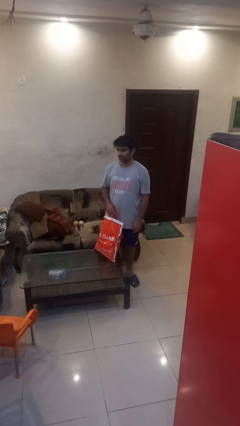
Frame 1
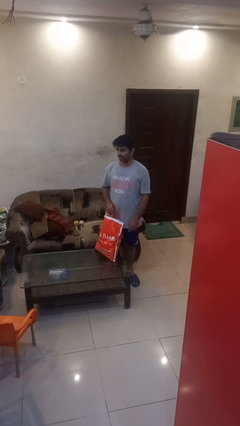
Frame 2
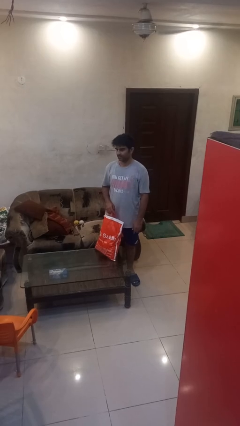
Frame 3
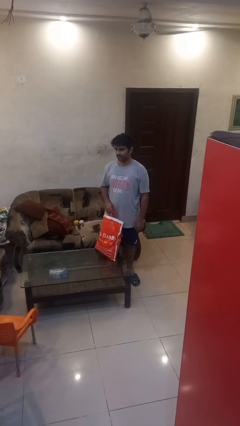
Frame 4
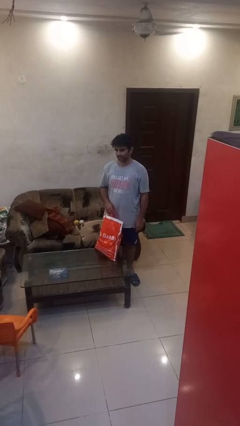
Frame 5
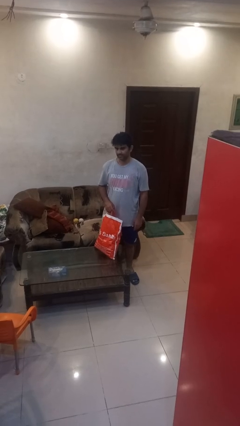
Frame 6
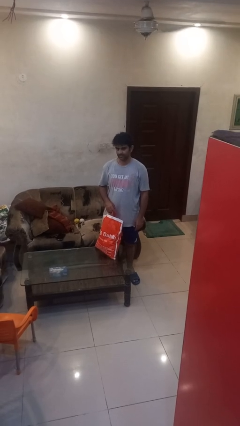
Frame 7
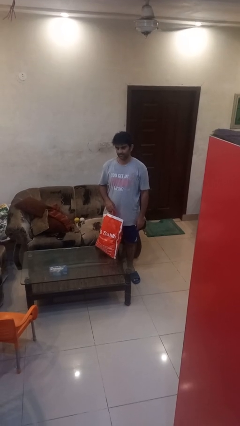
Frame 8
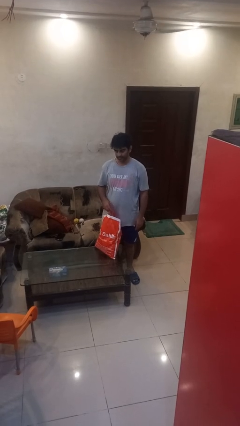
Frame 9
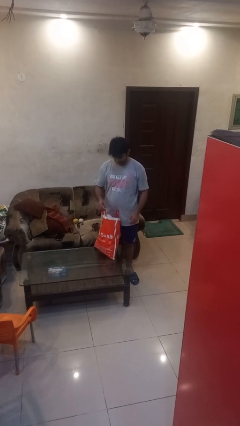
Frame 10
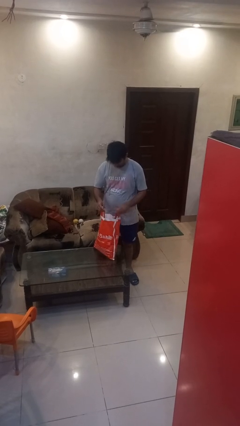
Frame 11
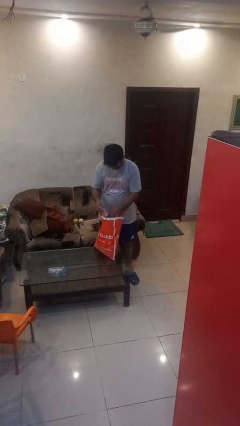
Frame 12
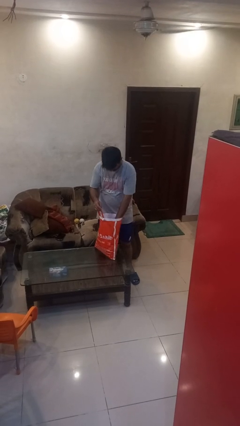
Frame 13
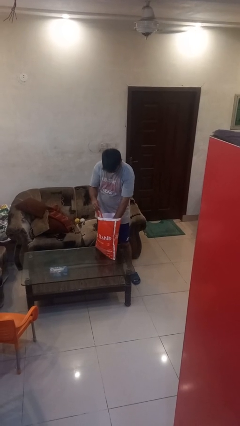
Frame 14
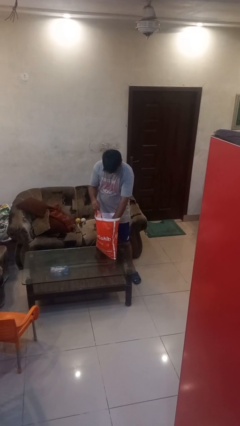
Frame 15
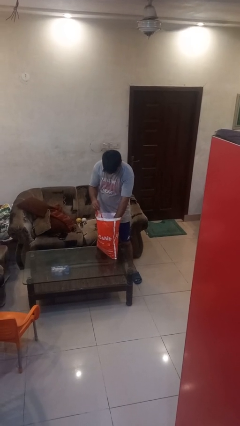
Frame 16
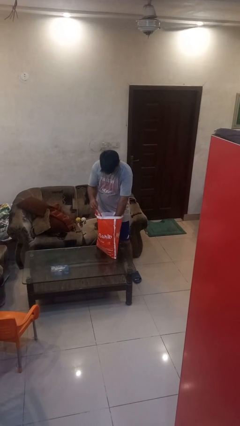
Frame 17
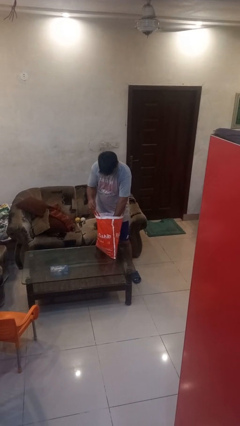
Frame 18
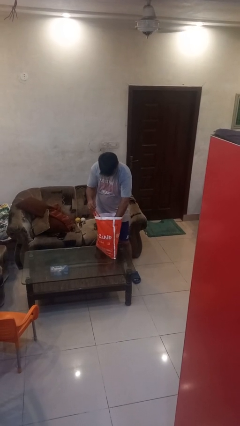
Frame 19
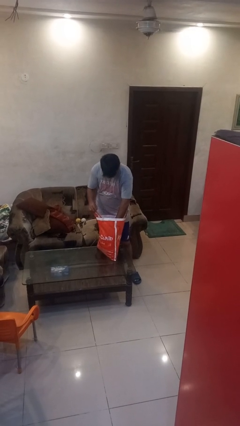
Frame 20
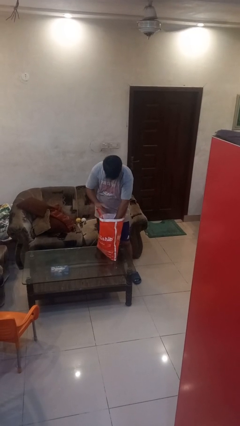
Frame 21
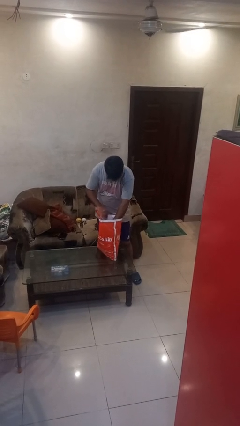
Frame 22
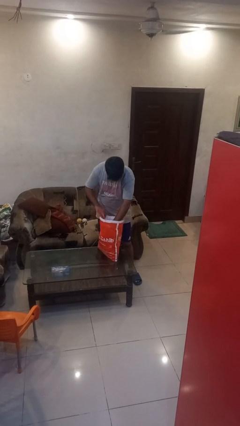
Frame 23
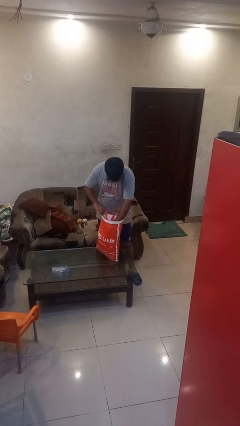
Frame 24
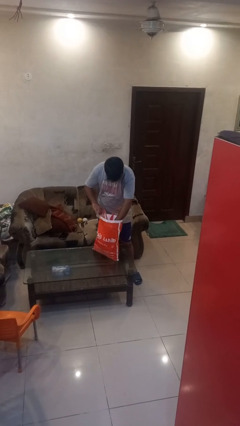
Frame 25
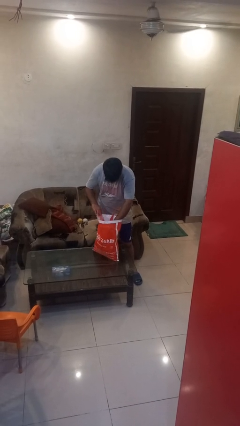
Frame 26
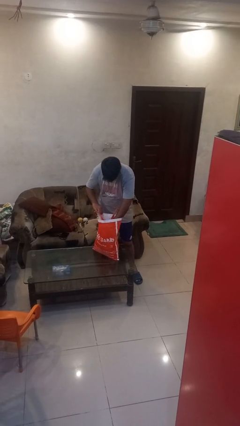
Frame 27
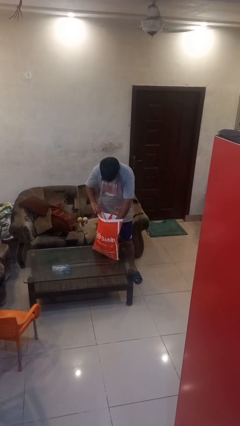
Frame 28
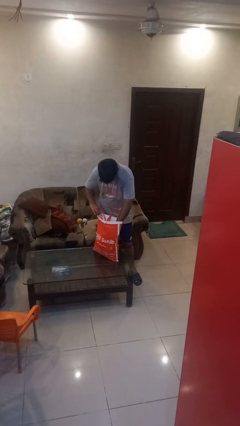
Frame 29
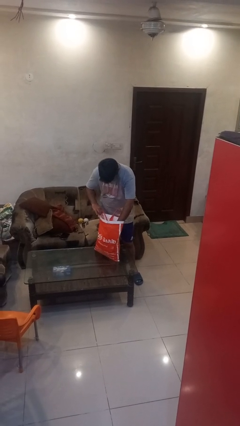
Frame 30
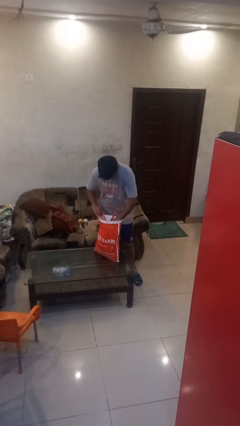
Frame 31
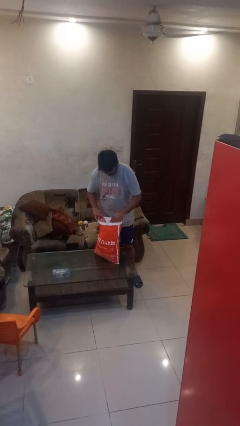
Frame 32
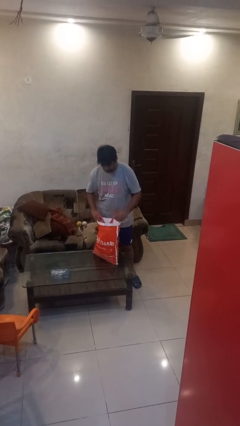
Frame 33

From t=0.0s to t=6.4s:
person searches in bag

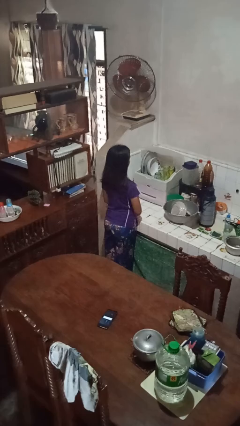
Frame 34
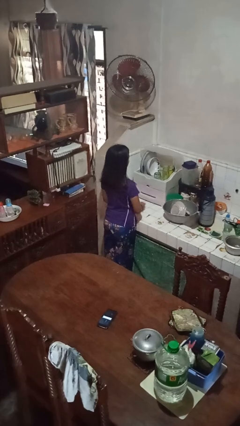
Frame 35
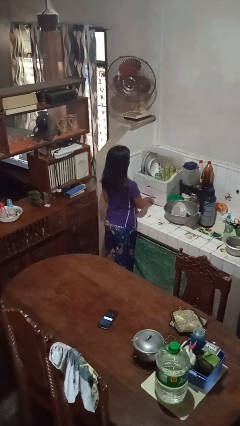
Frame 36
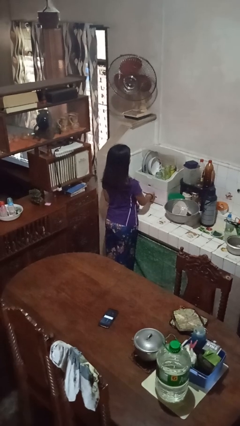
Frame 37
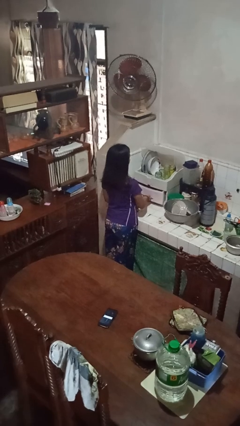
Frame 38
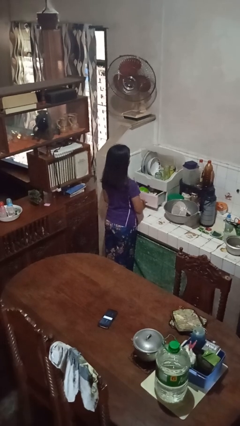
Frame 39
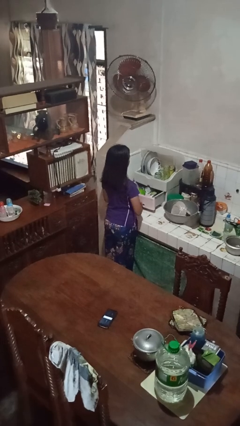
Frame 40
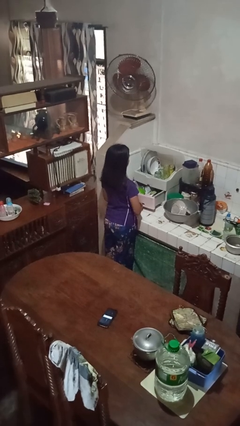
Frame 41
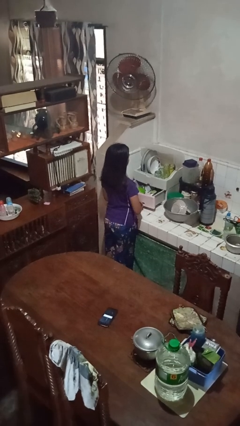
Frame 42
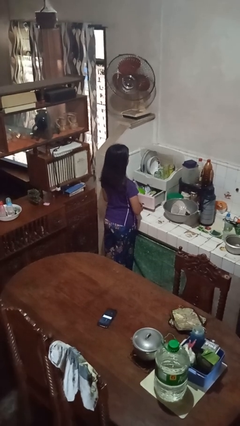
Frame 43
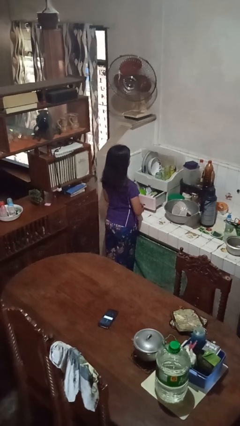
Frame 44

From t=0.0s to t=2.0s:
person opens kitchen drawer

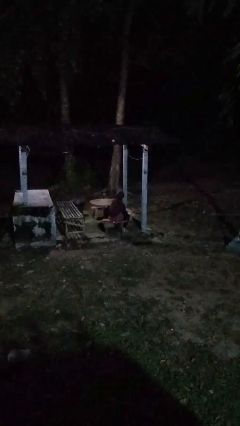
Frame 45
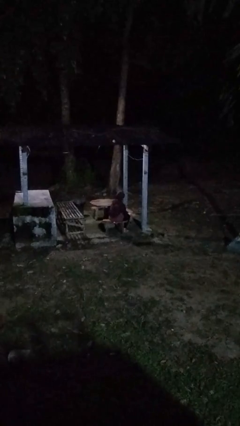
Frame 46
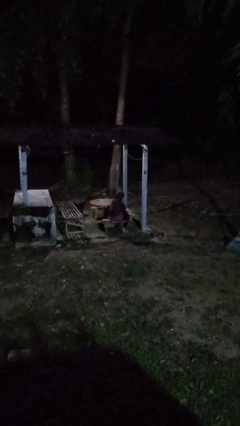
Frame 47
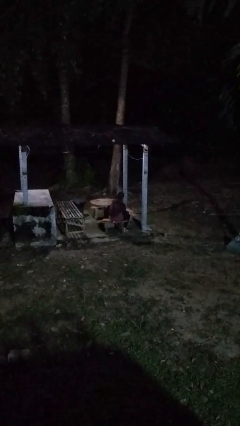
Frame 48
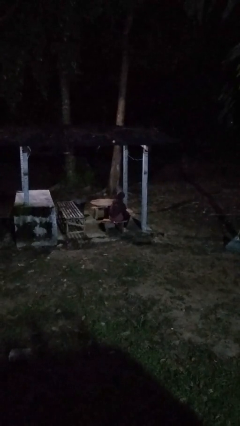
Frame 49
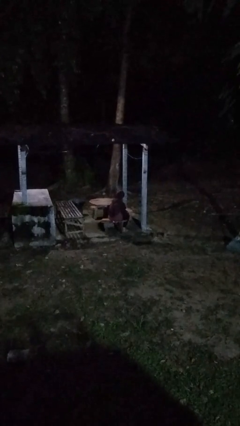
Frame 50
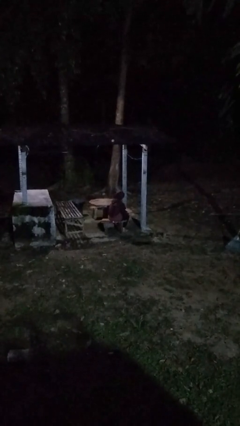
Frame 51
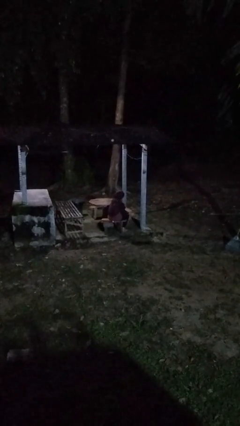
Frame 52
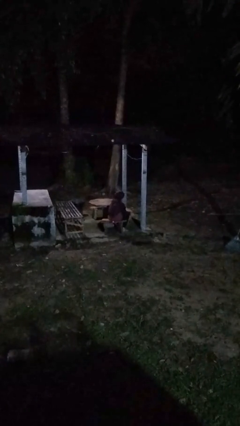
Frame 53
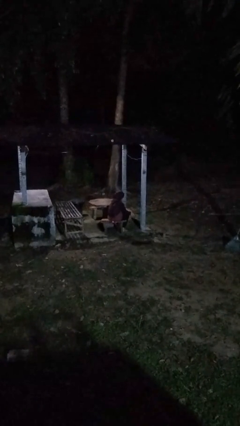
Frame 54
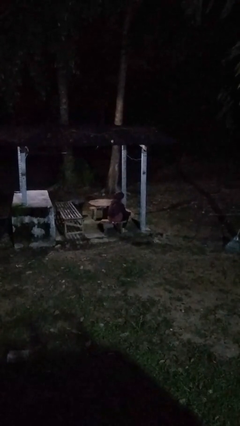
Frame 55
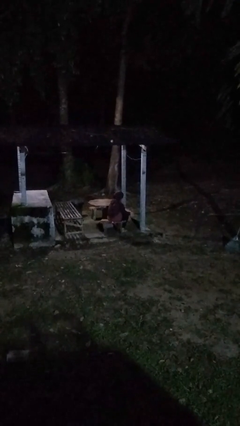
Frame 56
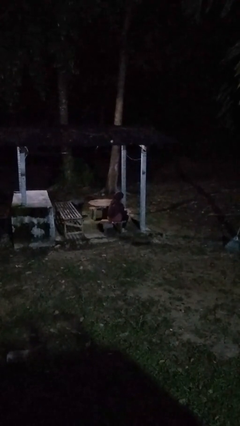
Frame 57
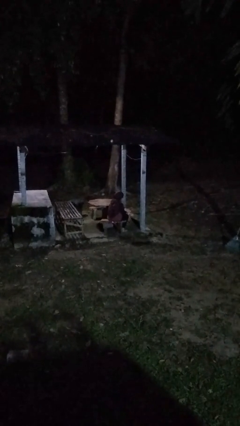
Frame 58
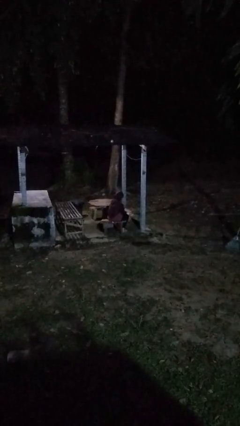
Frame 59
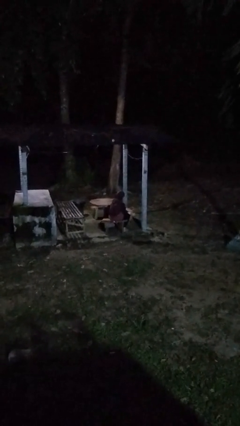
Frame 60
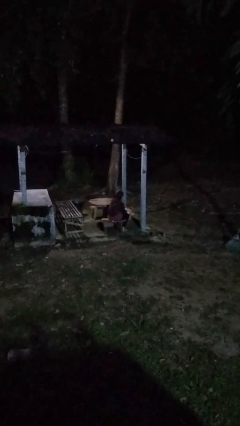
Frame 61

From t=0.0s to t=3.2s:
person rubs foot

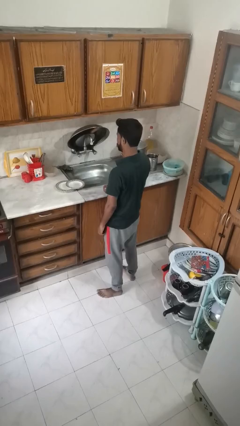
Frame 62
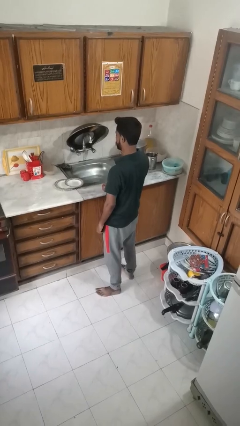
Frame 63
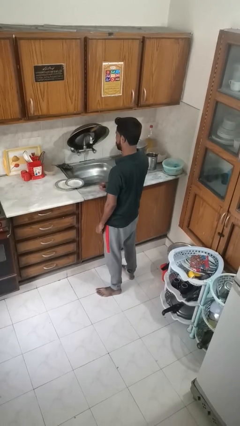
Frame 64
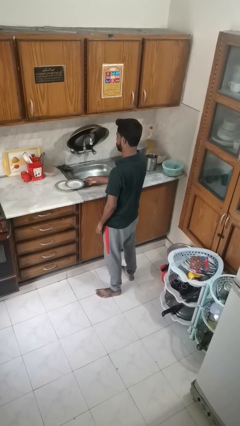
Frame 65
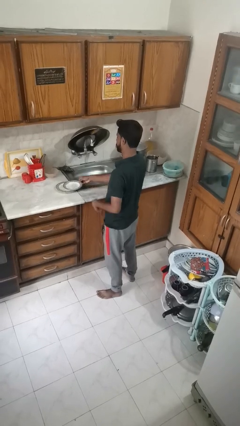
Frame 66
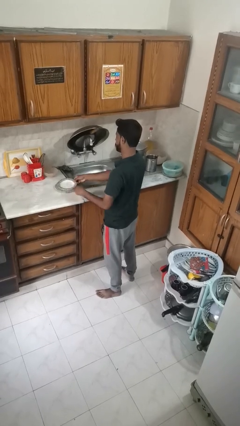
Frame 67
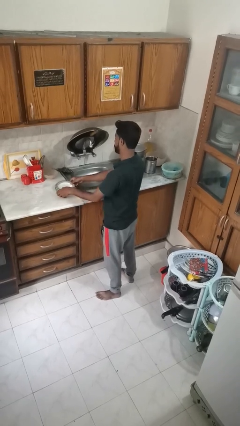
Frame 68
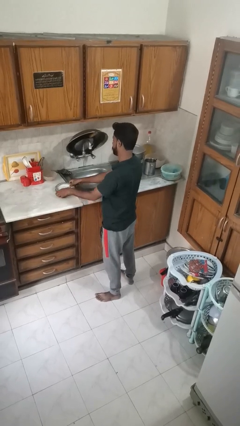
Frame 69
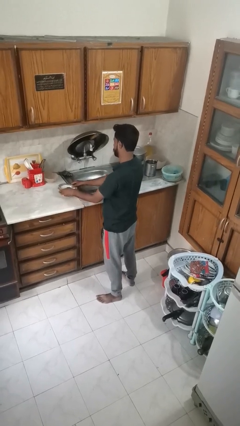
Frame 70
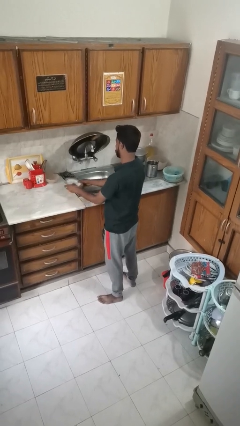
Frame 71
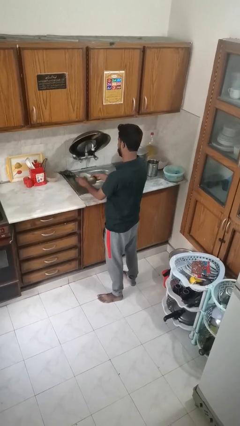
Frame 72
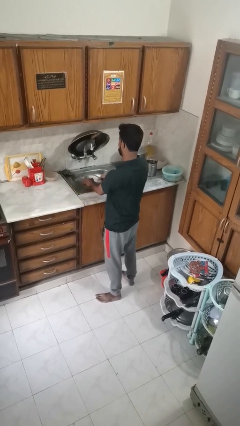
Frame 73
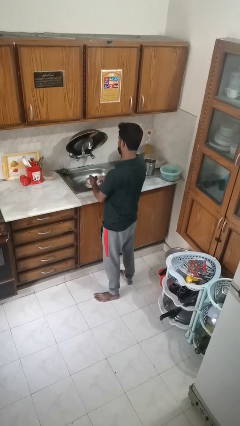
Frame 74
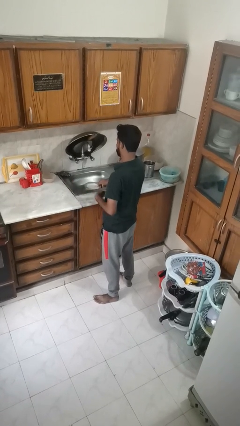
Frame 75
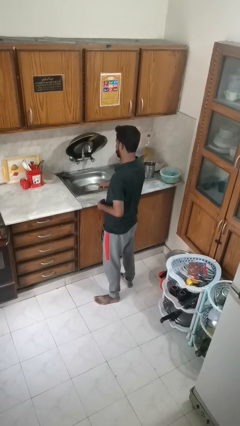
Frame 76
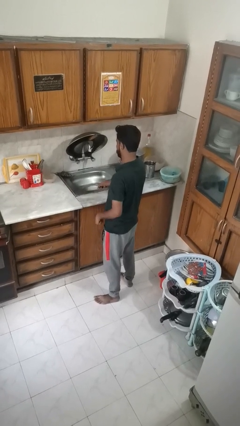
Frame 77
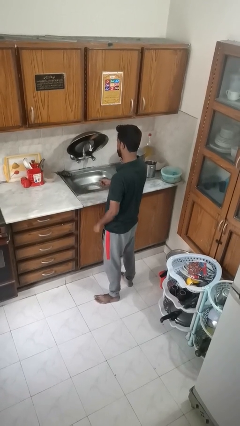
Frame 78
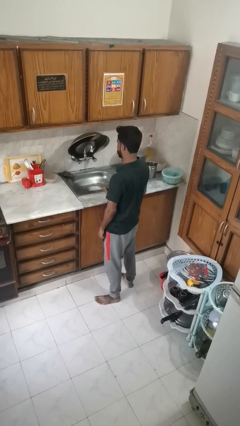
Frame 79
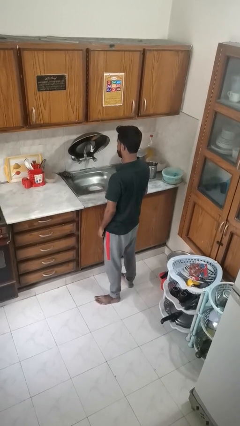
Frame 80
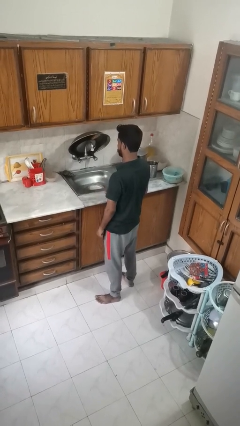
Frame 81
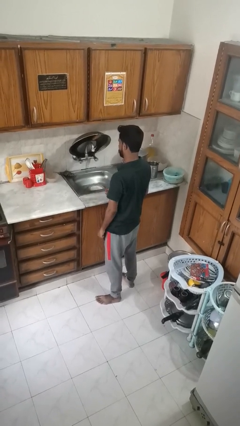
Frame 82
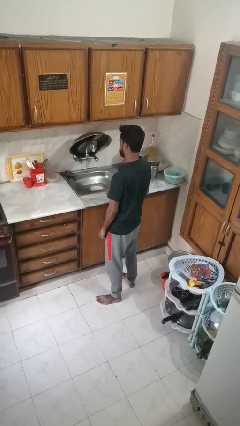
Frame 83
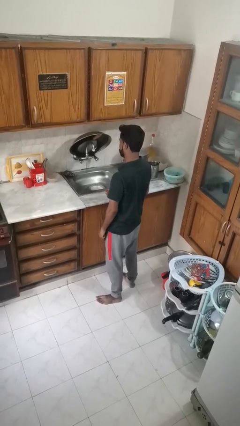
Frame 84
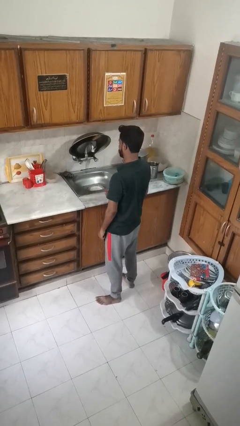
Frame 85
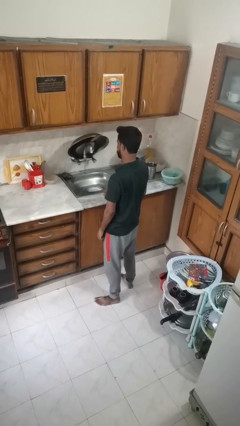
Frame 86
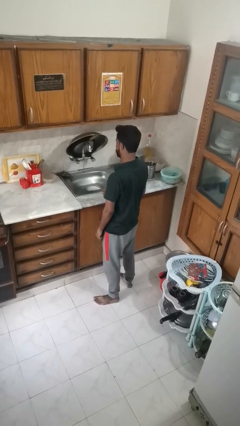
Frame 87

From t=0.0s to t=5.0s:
person opens dishwasher

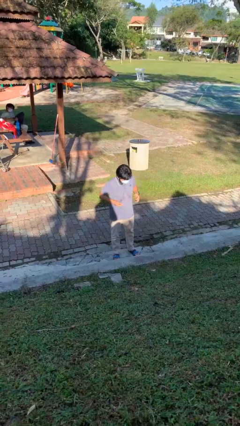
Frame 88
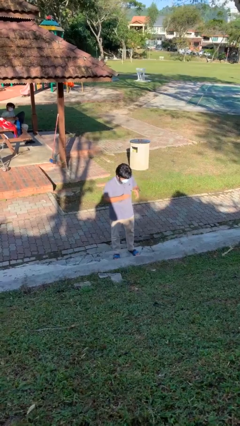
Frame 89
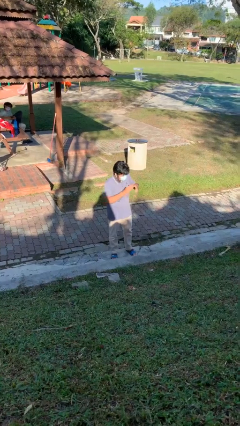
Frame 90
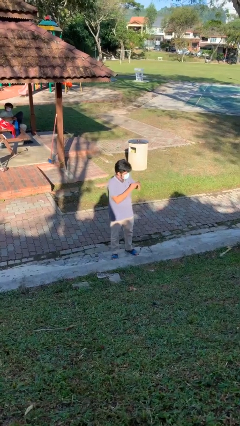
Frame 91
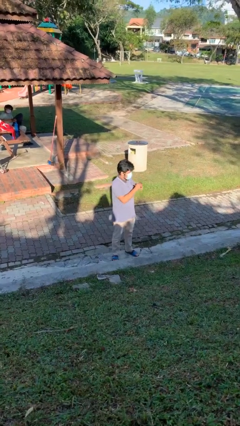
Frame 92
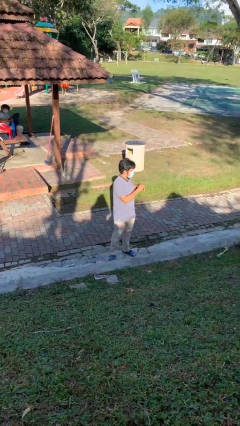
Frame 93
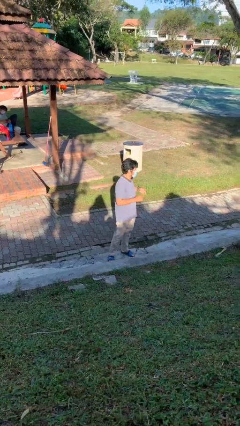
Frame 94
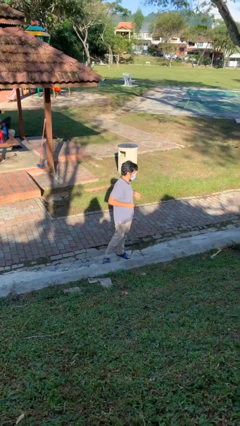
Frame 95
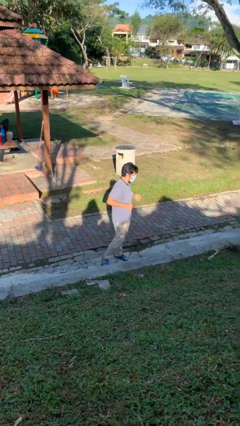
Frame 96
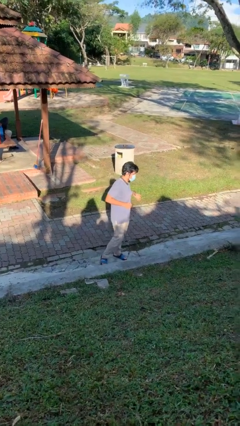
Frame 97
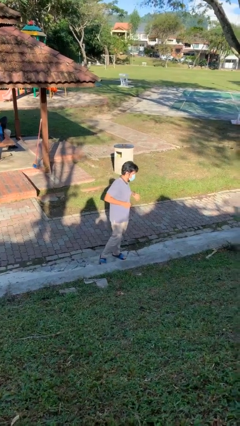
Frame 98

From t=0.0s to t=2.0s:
person puts on ring
